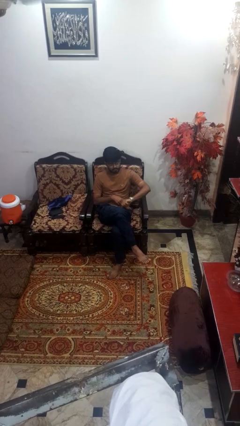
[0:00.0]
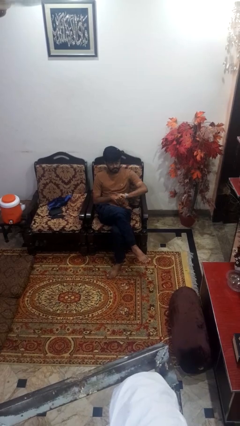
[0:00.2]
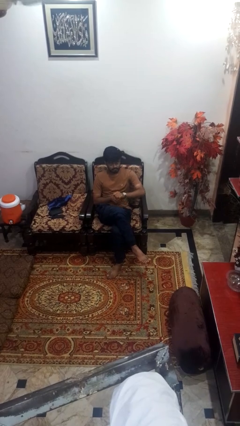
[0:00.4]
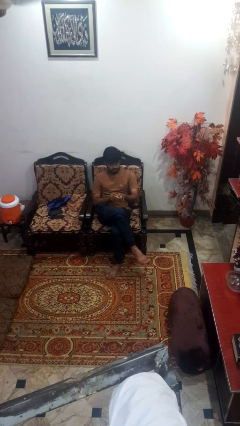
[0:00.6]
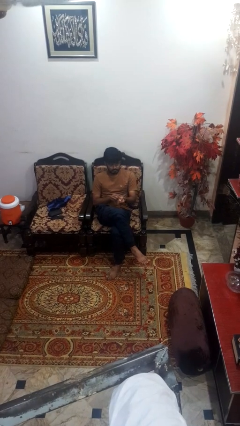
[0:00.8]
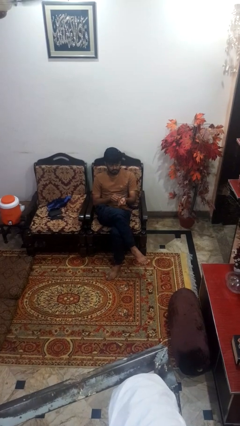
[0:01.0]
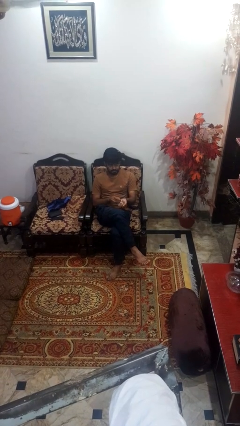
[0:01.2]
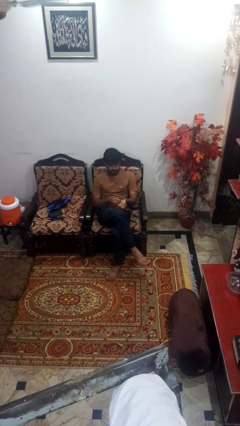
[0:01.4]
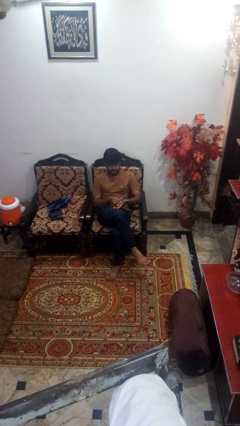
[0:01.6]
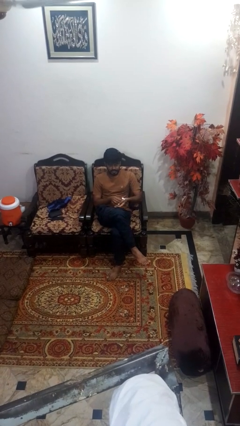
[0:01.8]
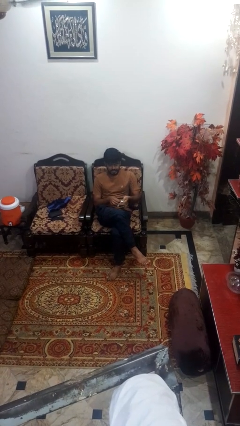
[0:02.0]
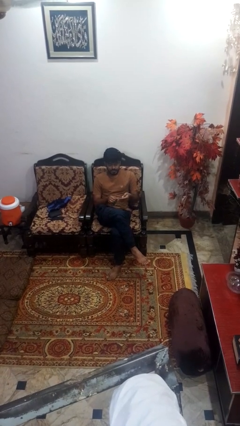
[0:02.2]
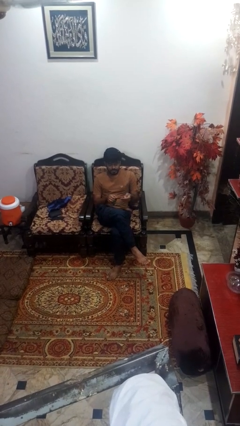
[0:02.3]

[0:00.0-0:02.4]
person takes off wristwatch

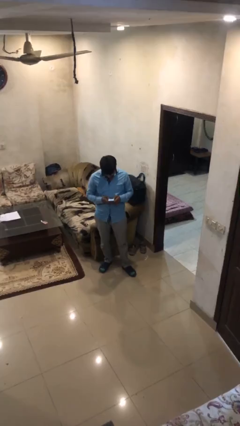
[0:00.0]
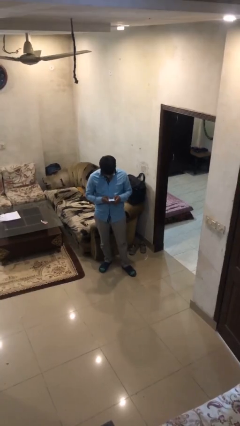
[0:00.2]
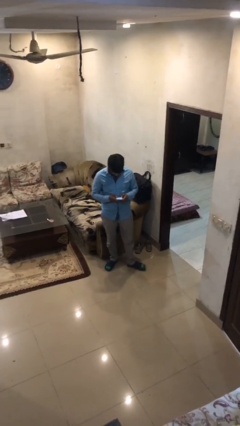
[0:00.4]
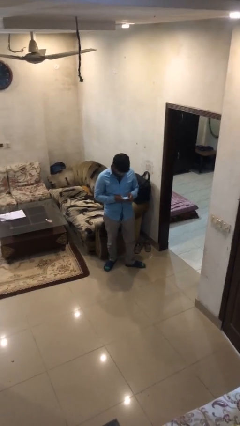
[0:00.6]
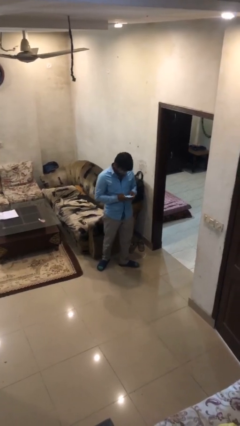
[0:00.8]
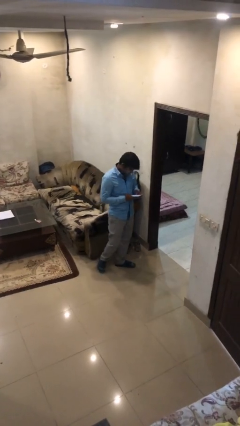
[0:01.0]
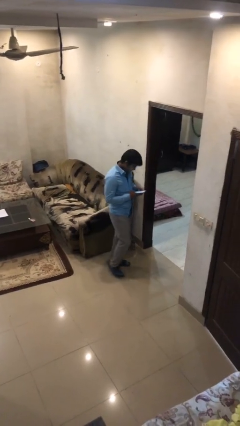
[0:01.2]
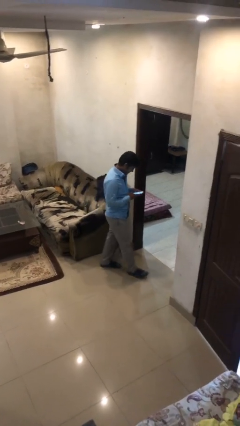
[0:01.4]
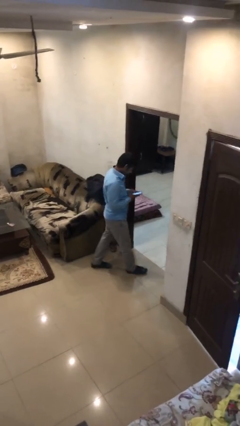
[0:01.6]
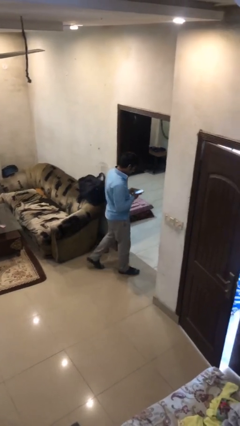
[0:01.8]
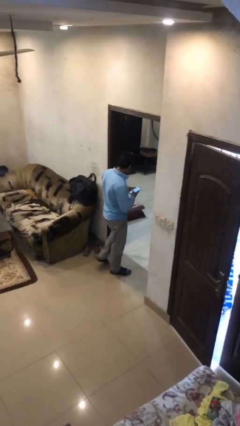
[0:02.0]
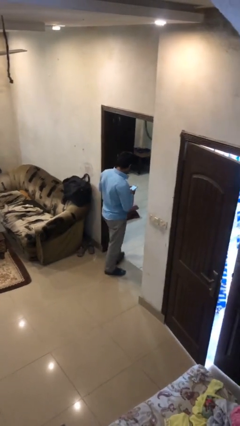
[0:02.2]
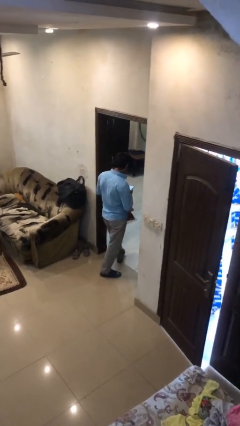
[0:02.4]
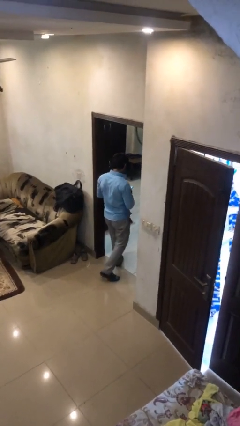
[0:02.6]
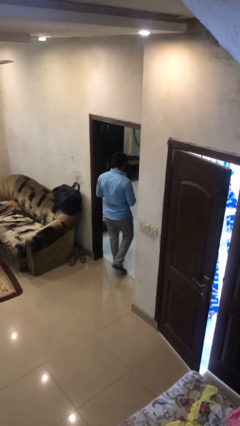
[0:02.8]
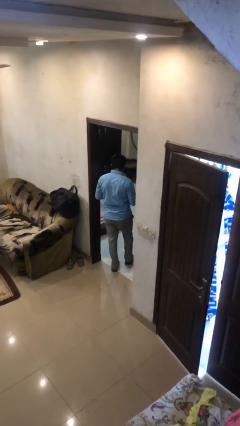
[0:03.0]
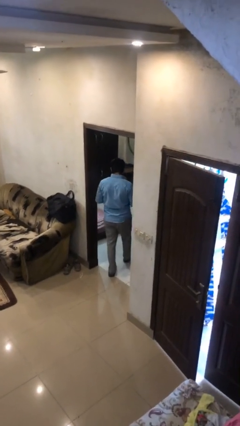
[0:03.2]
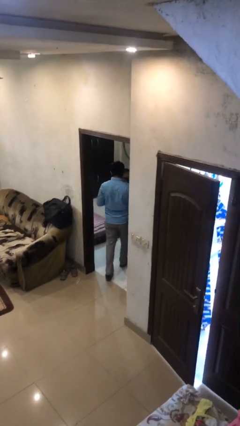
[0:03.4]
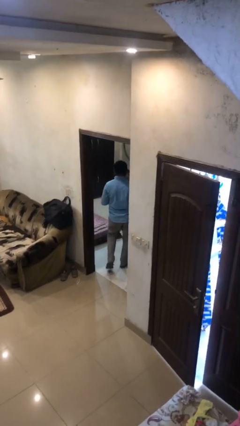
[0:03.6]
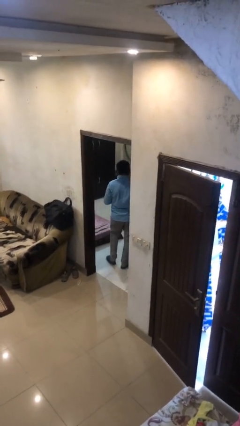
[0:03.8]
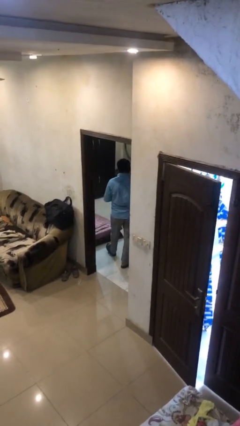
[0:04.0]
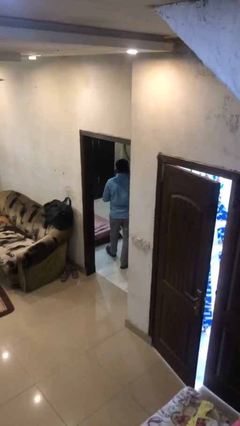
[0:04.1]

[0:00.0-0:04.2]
person exits scene through structure

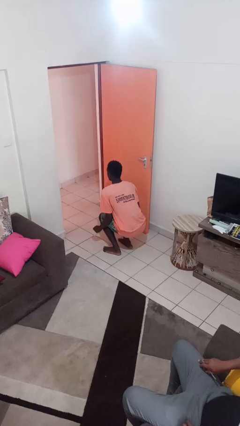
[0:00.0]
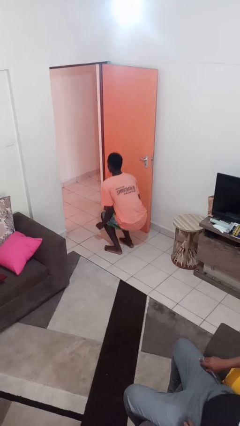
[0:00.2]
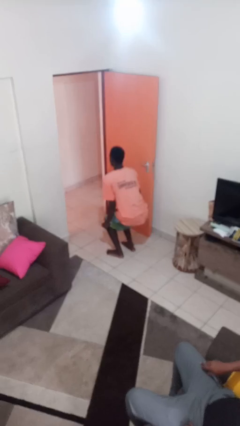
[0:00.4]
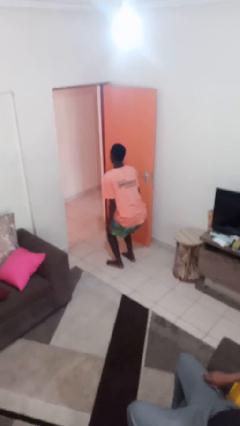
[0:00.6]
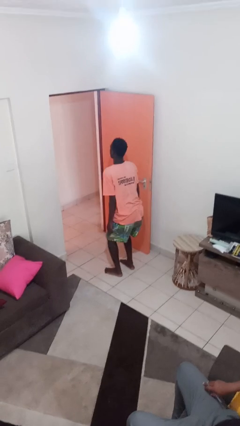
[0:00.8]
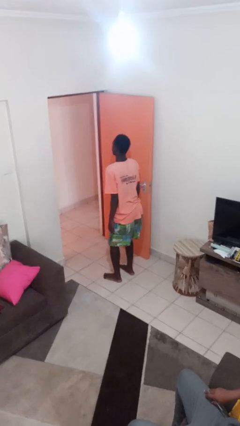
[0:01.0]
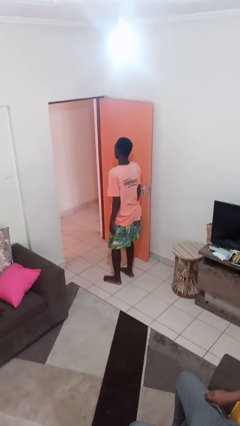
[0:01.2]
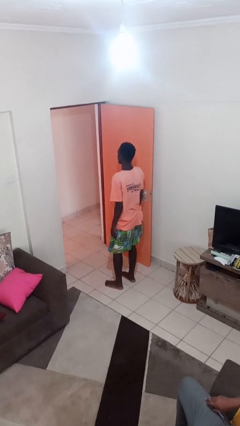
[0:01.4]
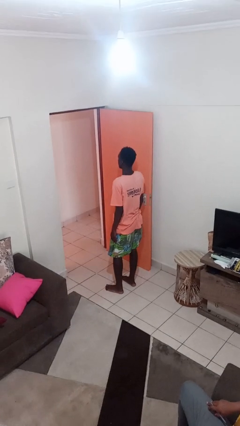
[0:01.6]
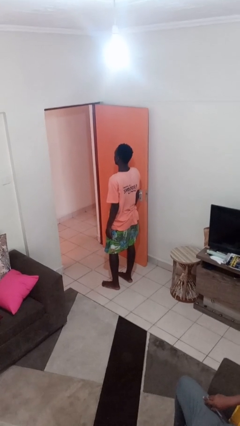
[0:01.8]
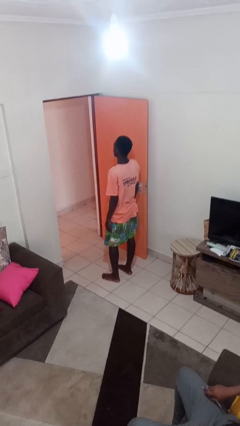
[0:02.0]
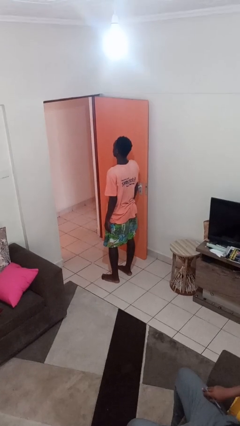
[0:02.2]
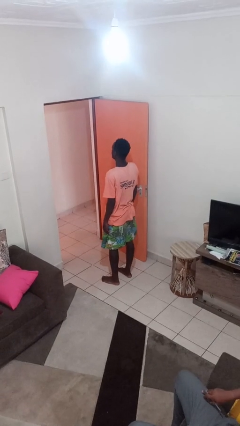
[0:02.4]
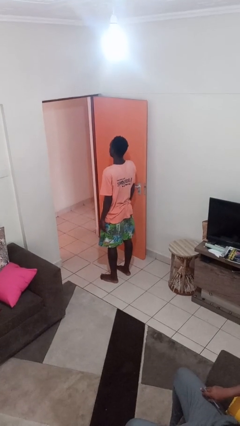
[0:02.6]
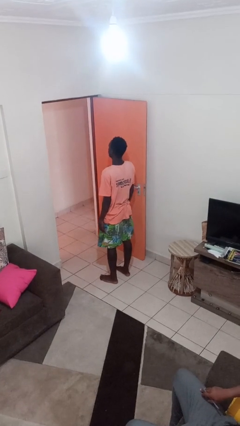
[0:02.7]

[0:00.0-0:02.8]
person stands up

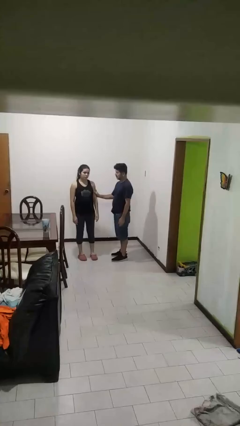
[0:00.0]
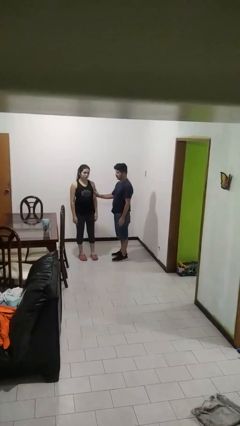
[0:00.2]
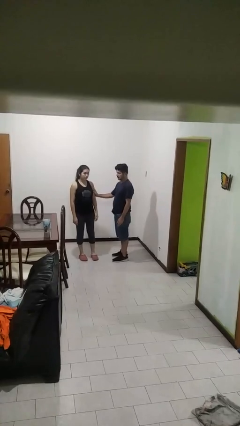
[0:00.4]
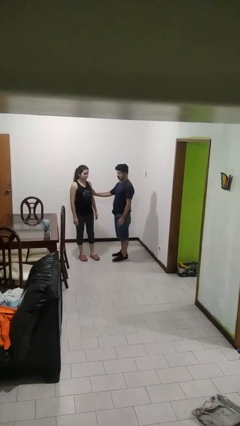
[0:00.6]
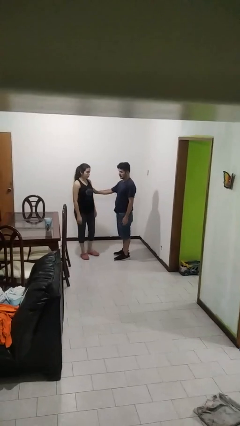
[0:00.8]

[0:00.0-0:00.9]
person grabs person by bicep

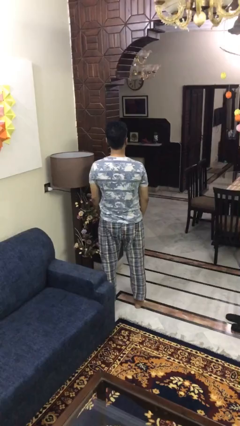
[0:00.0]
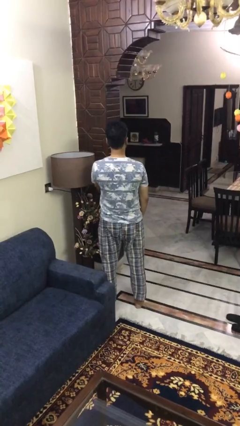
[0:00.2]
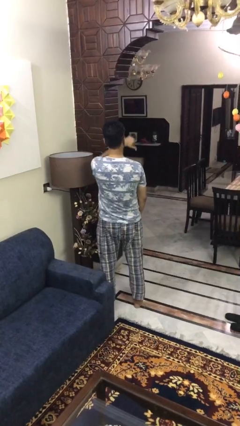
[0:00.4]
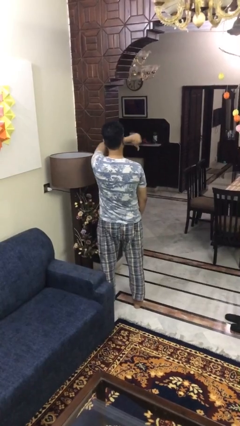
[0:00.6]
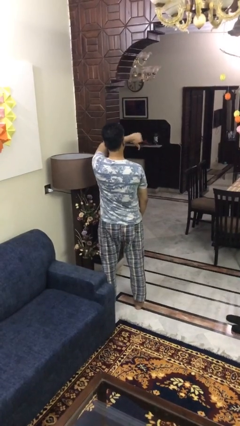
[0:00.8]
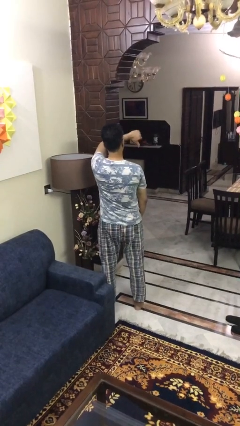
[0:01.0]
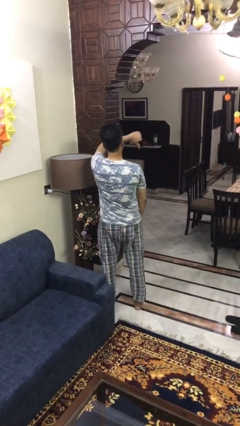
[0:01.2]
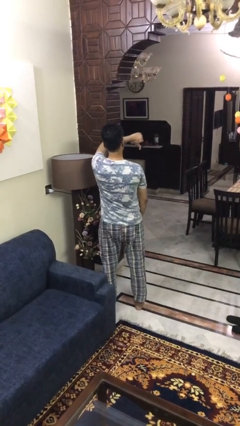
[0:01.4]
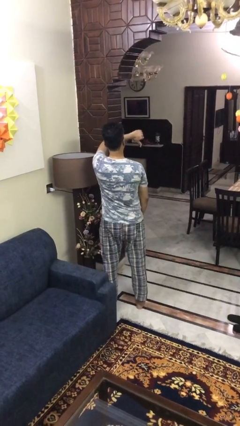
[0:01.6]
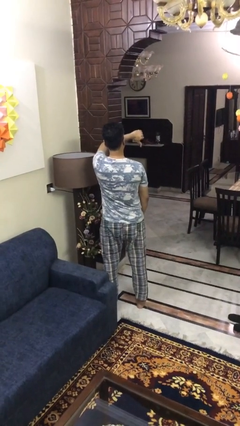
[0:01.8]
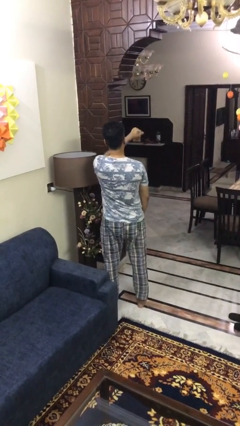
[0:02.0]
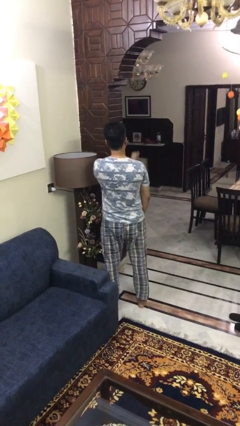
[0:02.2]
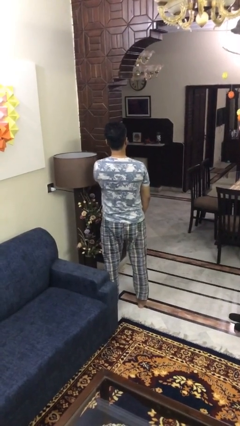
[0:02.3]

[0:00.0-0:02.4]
person gestures thumbs down

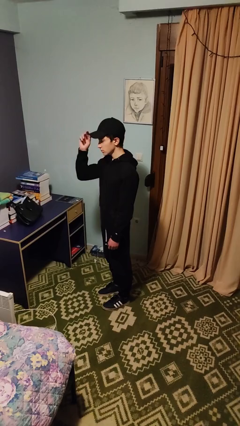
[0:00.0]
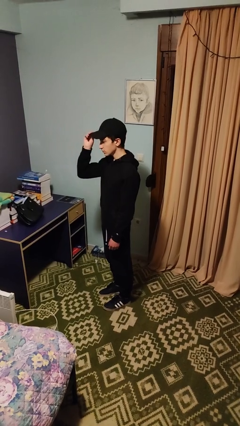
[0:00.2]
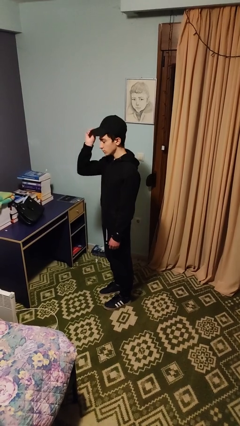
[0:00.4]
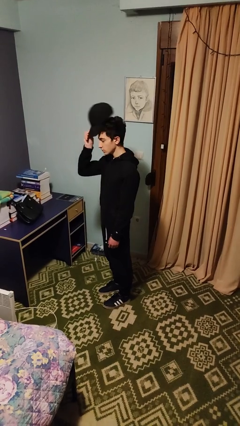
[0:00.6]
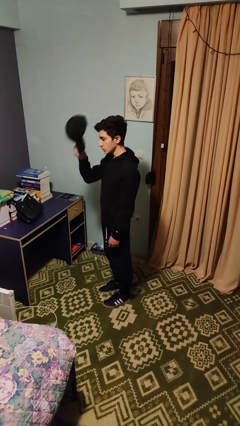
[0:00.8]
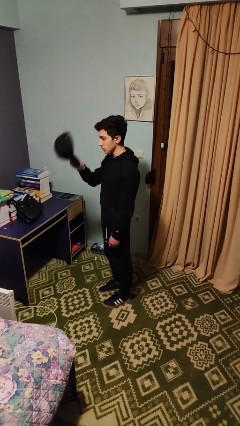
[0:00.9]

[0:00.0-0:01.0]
person takes off hat

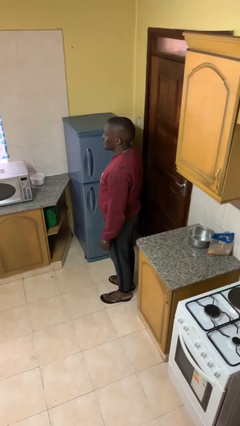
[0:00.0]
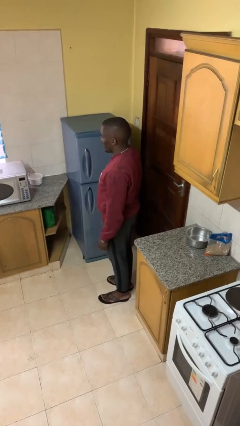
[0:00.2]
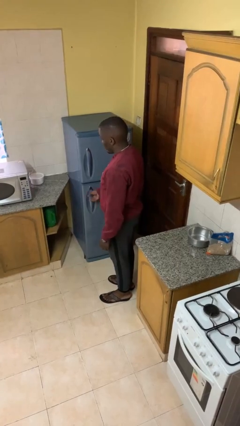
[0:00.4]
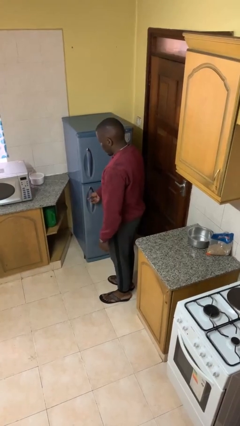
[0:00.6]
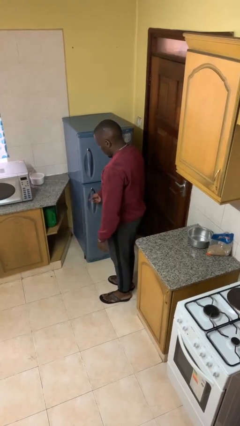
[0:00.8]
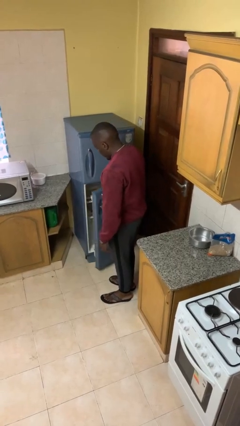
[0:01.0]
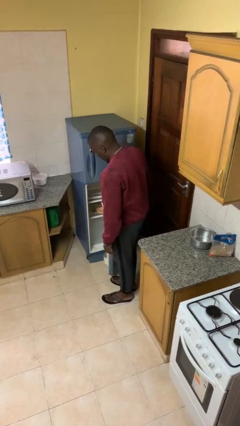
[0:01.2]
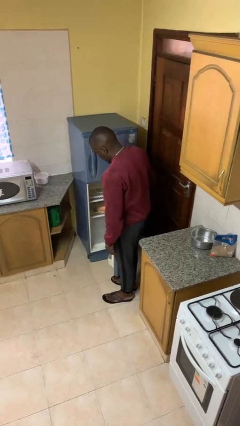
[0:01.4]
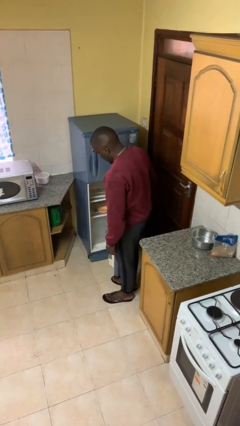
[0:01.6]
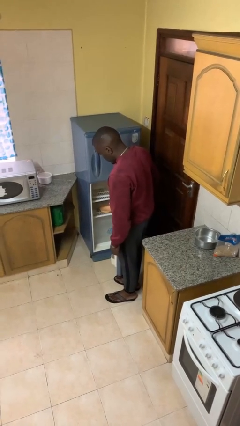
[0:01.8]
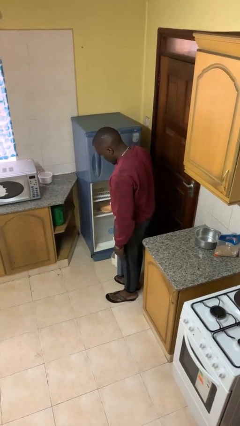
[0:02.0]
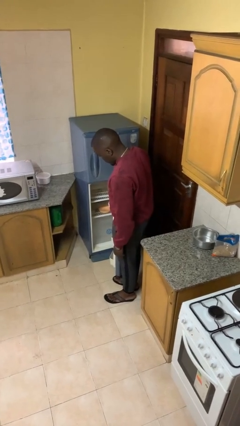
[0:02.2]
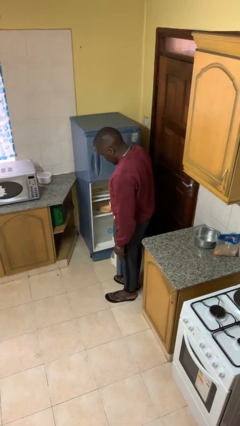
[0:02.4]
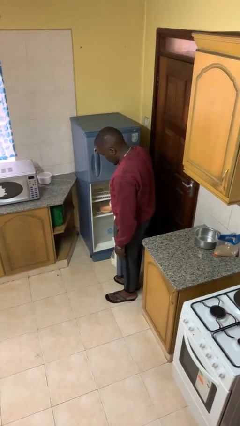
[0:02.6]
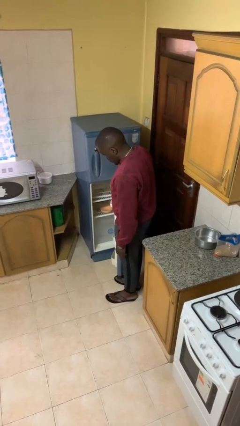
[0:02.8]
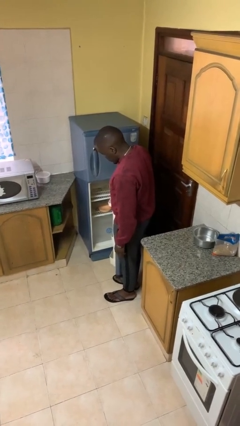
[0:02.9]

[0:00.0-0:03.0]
person opens refrigerator

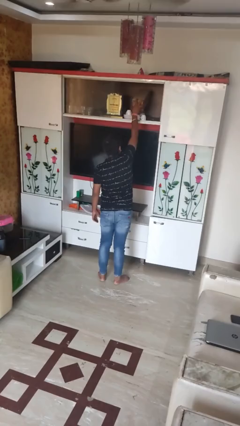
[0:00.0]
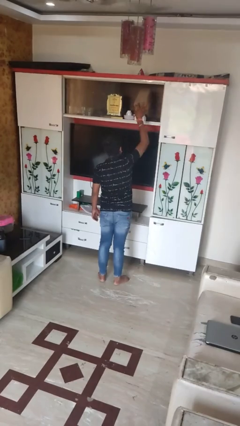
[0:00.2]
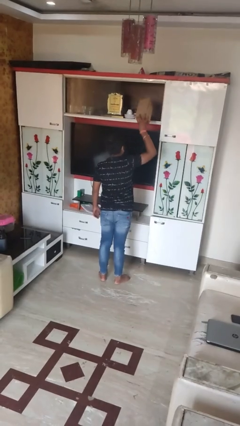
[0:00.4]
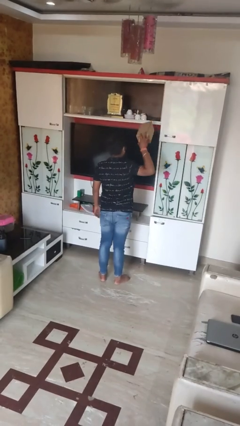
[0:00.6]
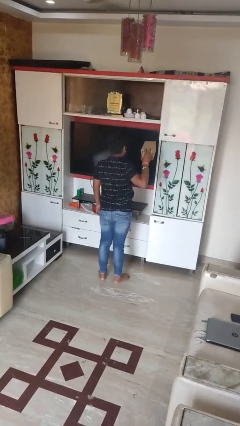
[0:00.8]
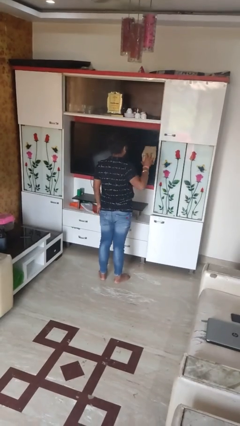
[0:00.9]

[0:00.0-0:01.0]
person picks up object from shelf
